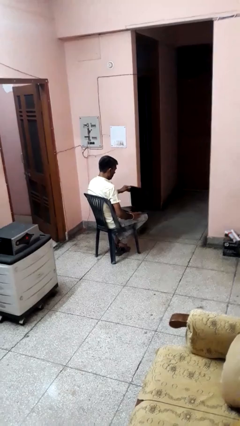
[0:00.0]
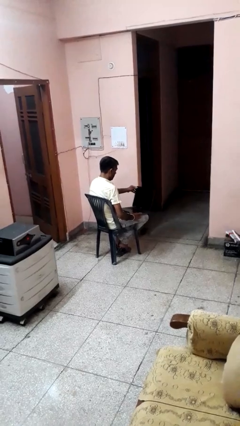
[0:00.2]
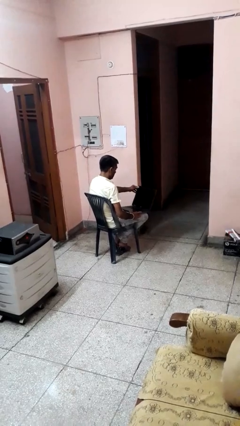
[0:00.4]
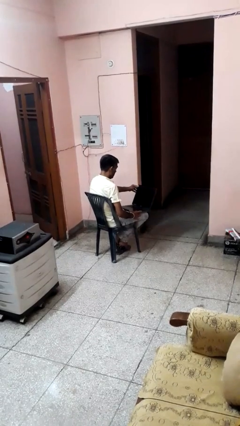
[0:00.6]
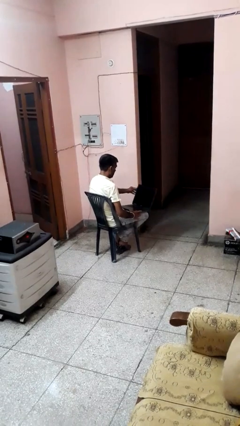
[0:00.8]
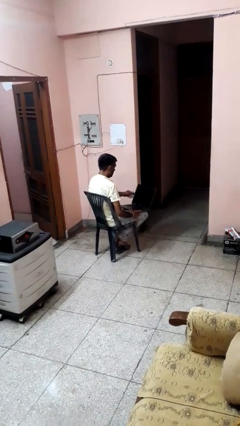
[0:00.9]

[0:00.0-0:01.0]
person opens laptop

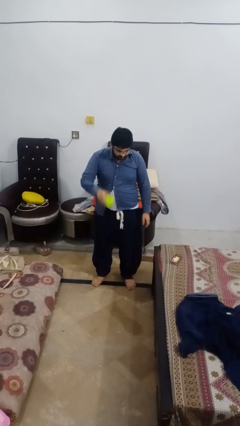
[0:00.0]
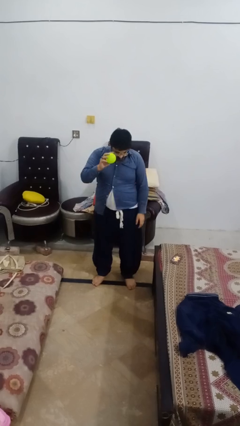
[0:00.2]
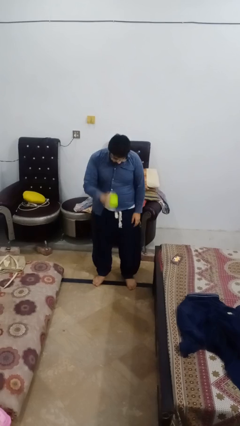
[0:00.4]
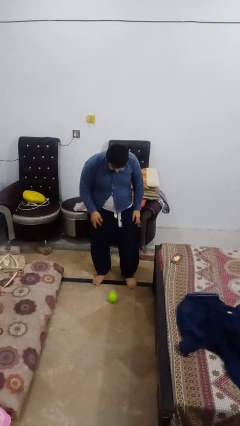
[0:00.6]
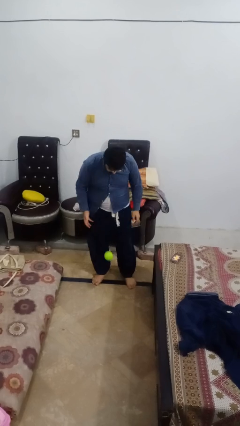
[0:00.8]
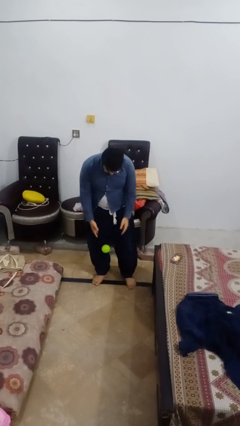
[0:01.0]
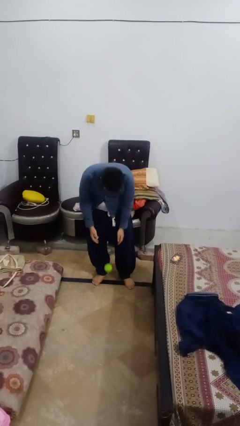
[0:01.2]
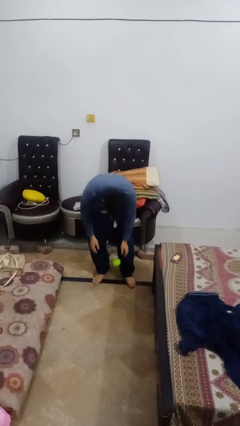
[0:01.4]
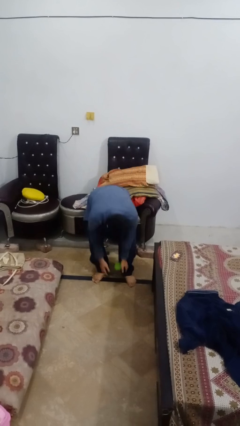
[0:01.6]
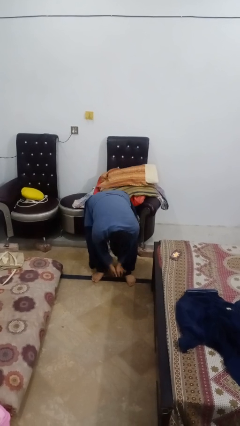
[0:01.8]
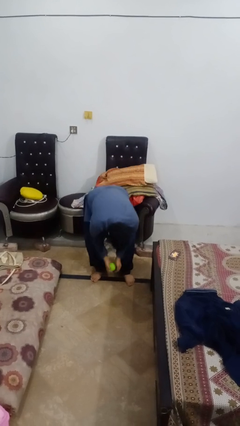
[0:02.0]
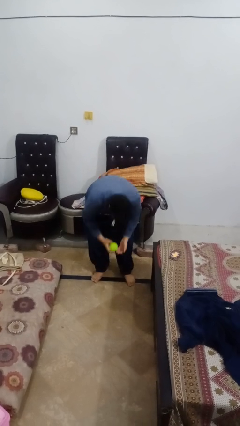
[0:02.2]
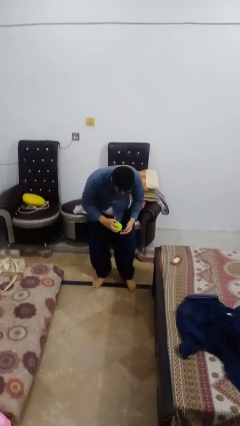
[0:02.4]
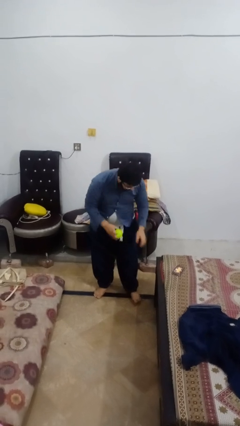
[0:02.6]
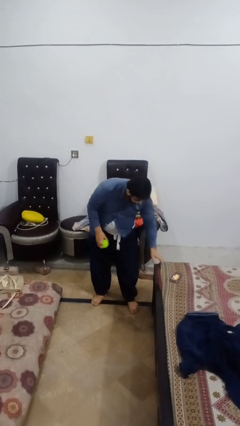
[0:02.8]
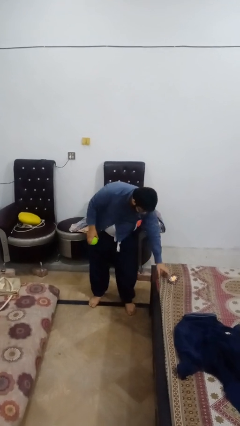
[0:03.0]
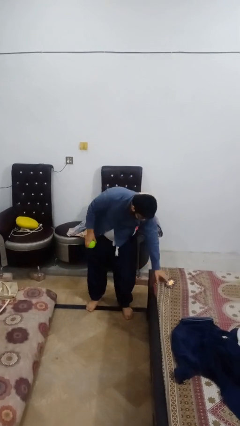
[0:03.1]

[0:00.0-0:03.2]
person bounces ball on floor

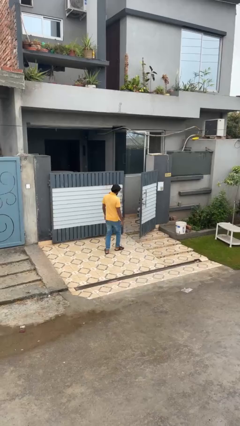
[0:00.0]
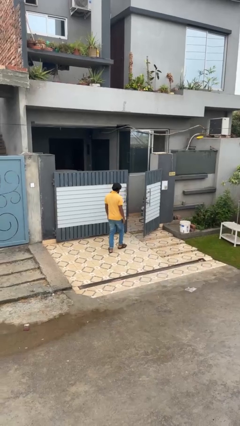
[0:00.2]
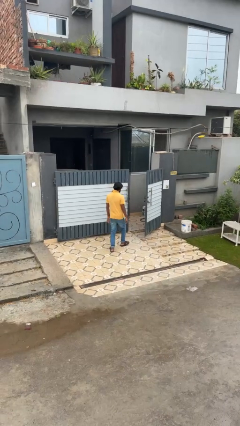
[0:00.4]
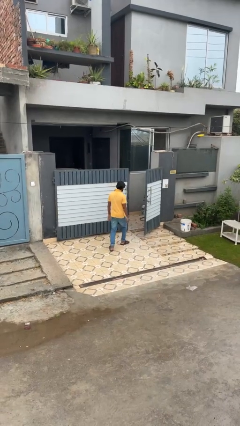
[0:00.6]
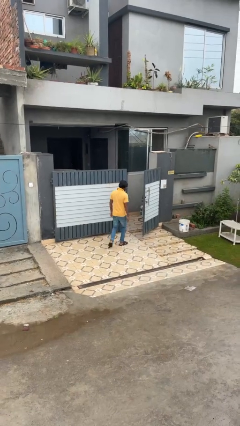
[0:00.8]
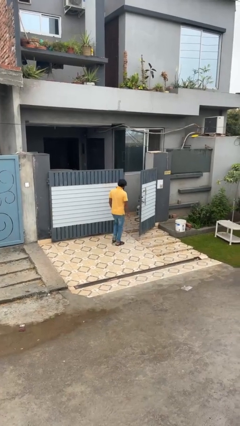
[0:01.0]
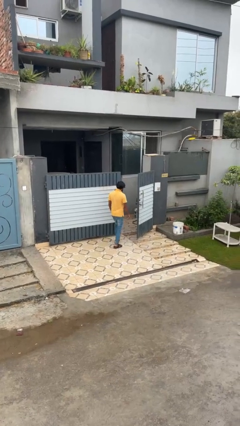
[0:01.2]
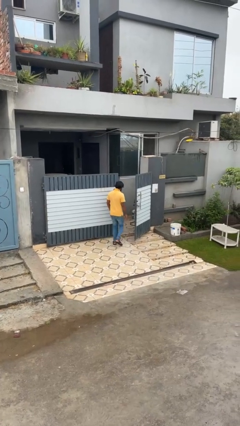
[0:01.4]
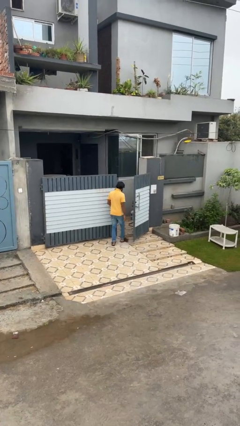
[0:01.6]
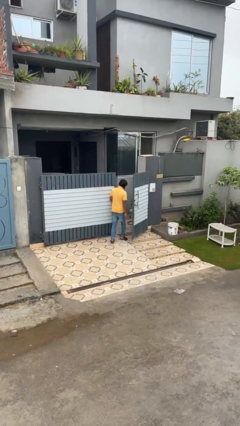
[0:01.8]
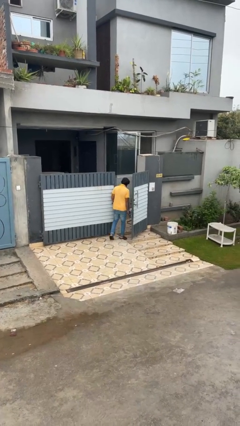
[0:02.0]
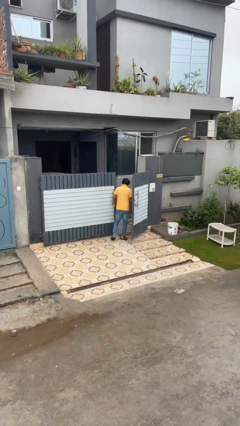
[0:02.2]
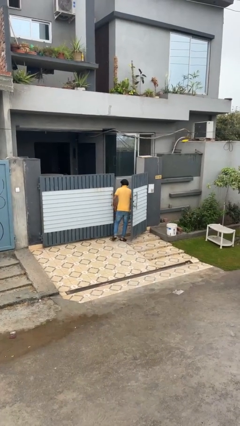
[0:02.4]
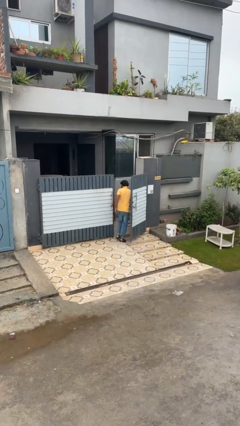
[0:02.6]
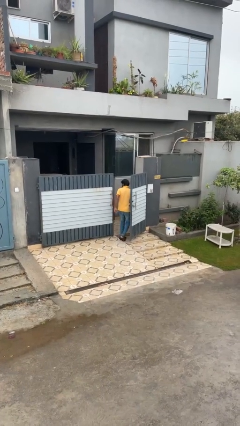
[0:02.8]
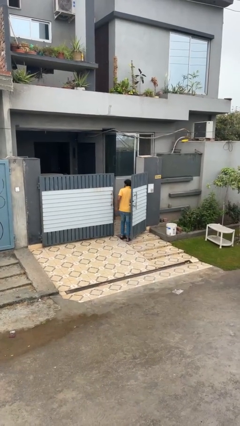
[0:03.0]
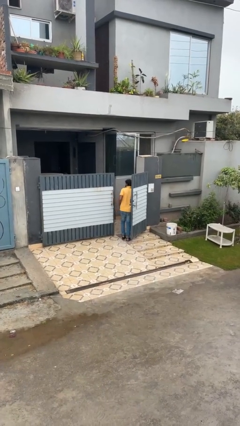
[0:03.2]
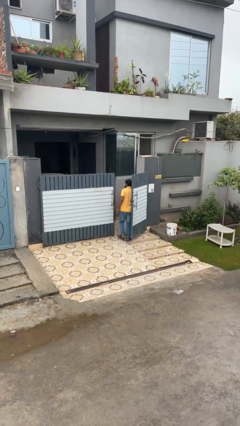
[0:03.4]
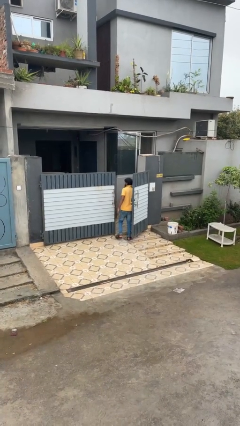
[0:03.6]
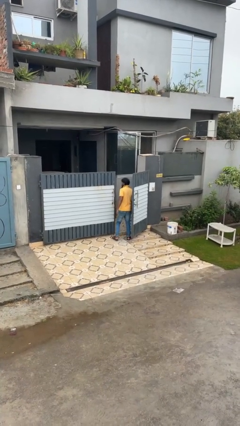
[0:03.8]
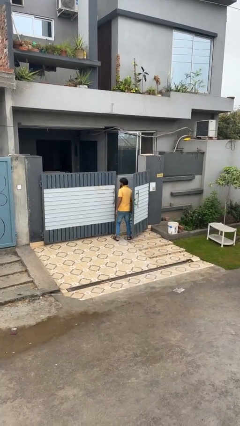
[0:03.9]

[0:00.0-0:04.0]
person bumps into wall

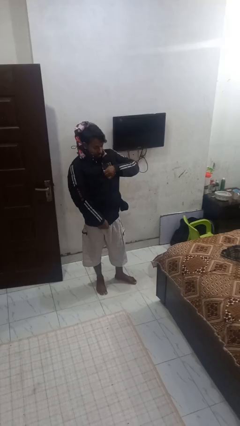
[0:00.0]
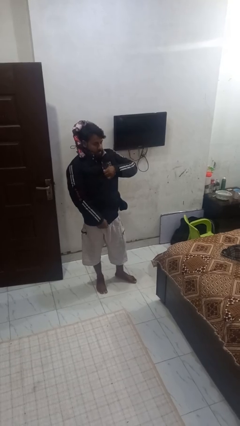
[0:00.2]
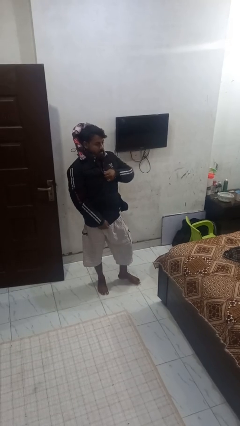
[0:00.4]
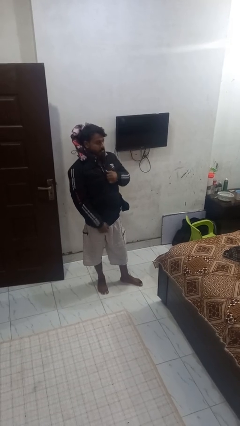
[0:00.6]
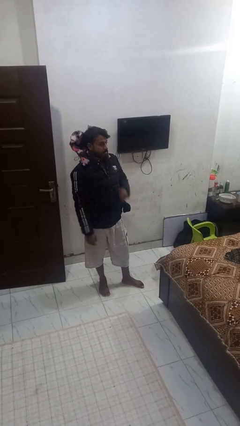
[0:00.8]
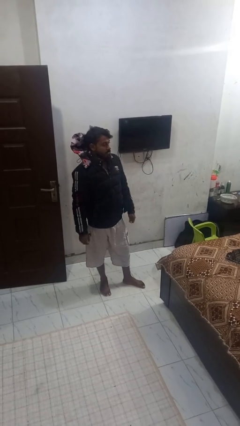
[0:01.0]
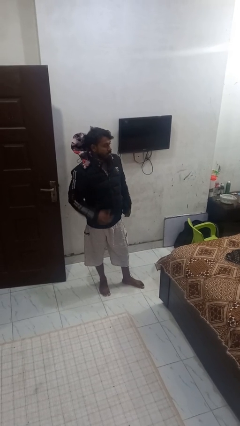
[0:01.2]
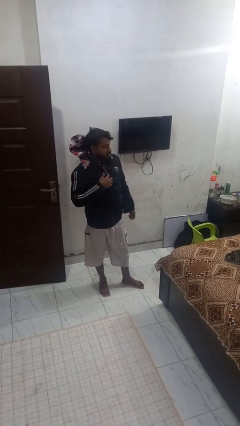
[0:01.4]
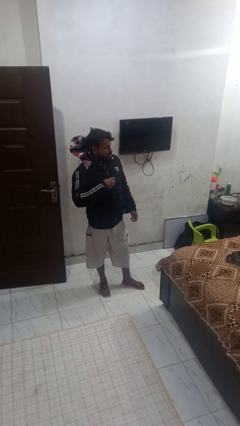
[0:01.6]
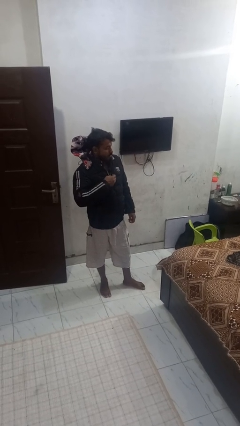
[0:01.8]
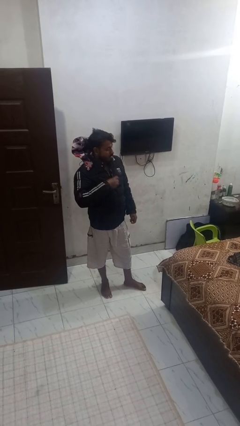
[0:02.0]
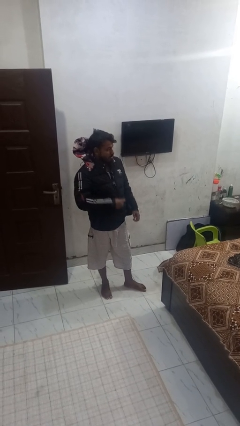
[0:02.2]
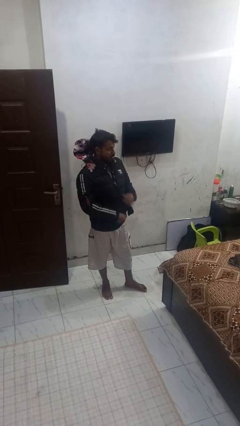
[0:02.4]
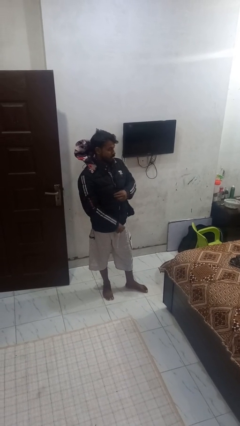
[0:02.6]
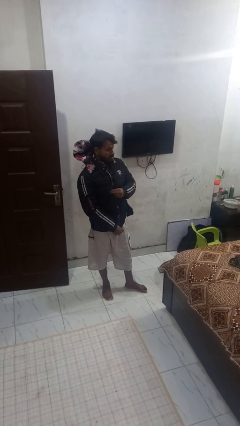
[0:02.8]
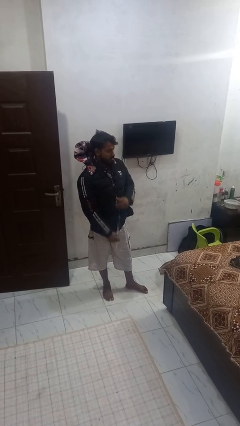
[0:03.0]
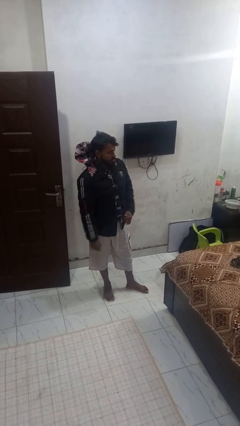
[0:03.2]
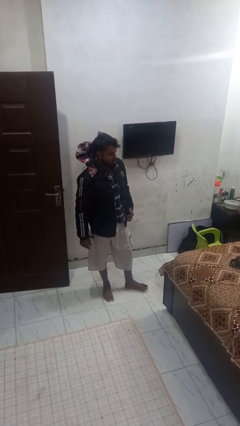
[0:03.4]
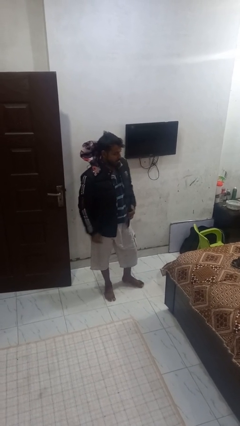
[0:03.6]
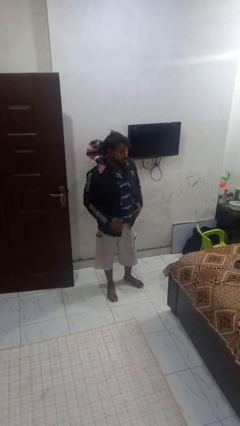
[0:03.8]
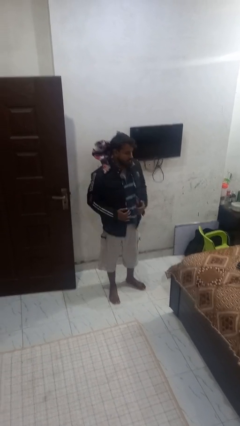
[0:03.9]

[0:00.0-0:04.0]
person unzips jacket

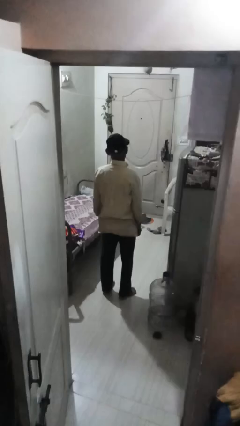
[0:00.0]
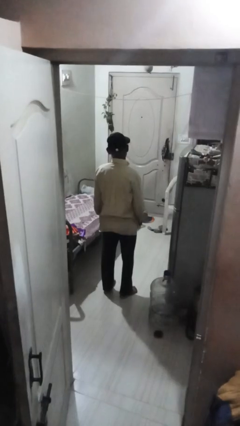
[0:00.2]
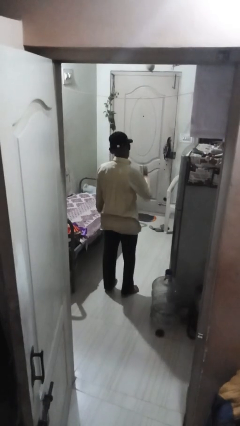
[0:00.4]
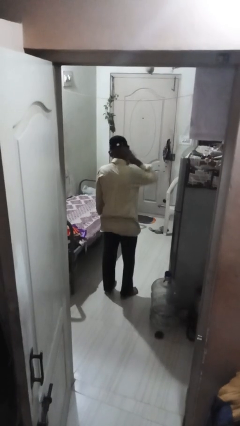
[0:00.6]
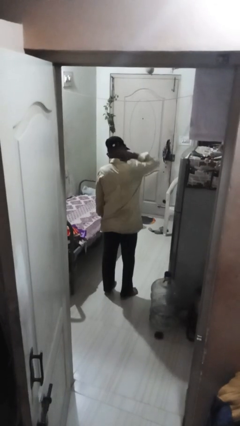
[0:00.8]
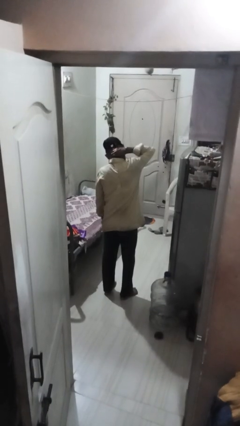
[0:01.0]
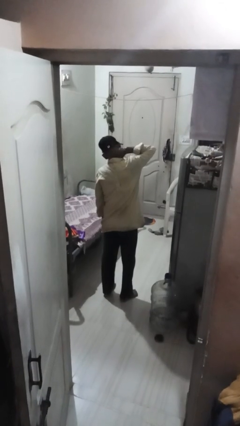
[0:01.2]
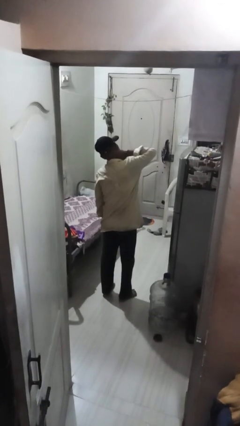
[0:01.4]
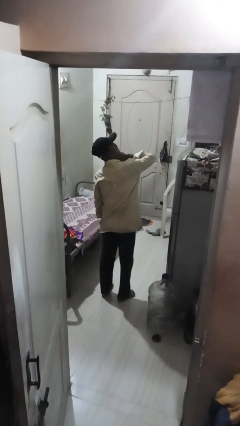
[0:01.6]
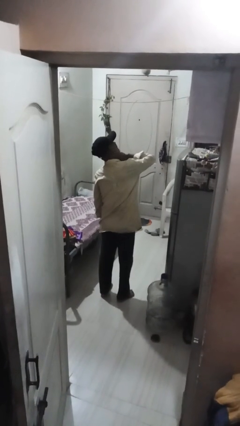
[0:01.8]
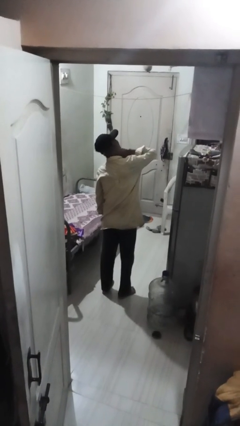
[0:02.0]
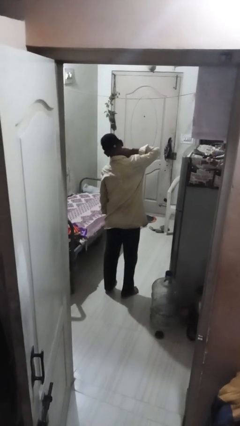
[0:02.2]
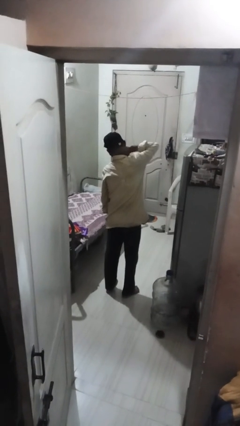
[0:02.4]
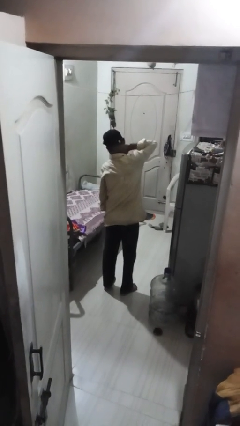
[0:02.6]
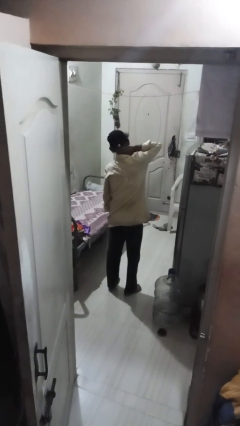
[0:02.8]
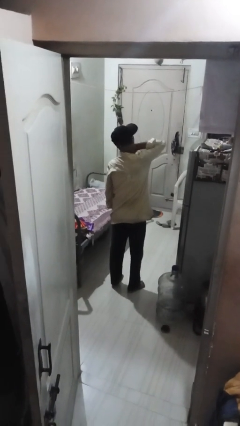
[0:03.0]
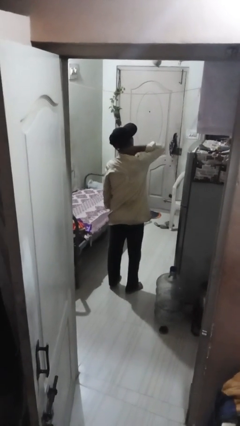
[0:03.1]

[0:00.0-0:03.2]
person rubs neck

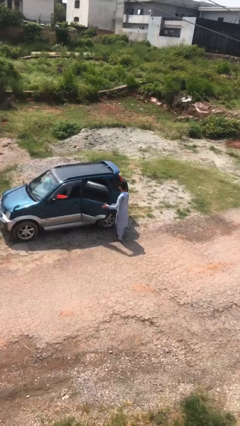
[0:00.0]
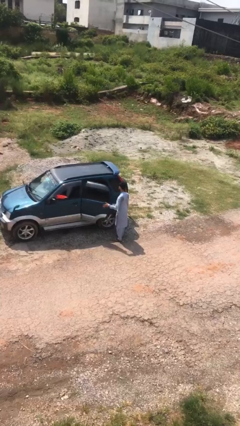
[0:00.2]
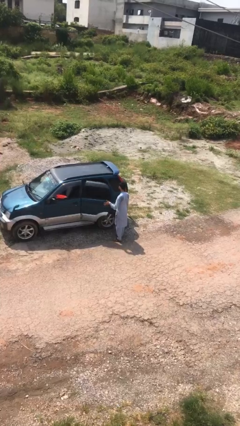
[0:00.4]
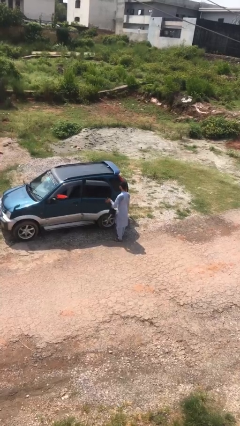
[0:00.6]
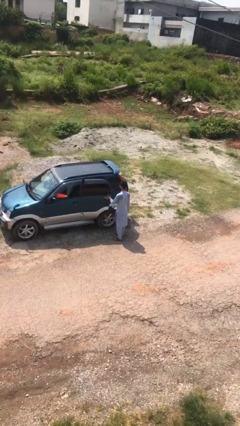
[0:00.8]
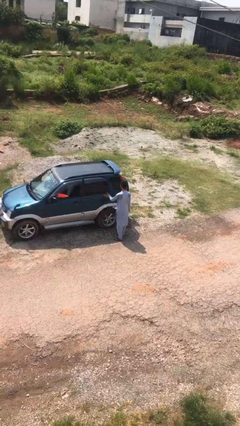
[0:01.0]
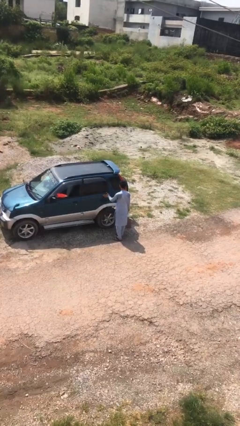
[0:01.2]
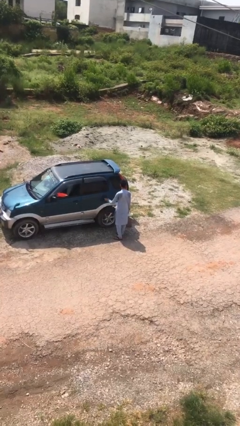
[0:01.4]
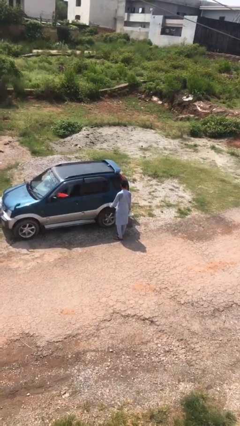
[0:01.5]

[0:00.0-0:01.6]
person closes car door

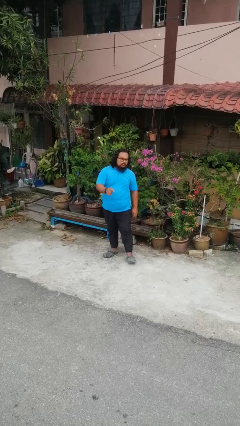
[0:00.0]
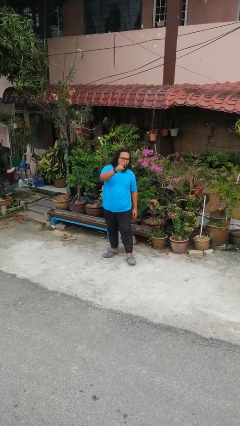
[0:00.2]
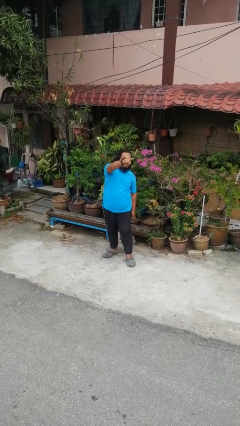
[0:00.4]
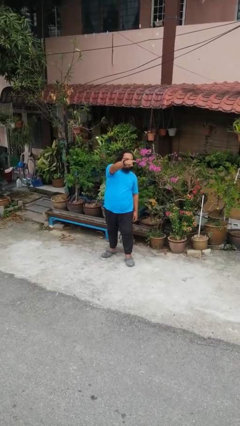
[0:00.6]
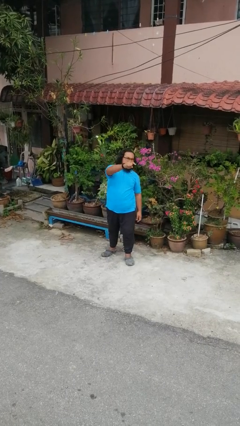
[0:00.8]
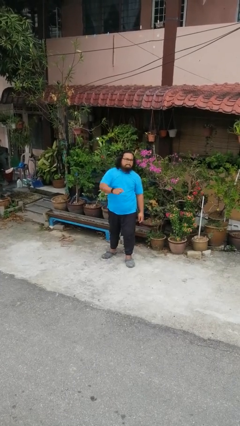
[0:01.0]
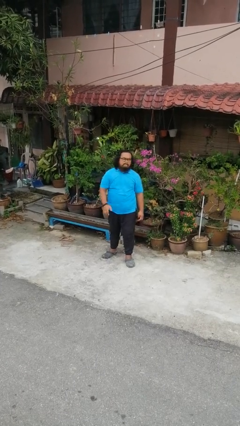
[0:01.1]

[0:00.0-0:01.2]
person points at person
